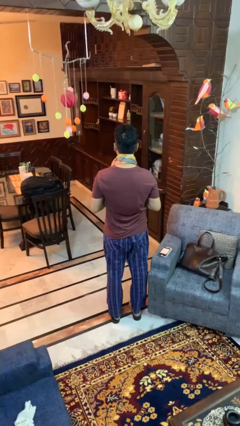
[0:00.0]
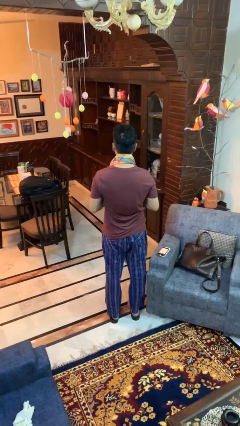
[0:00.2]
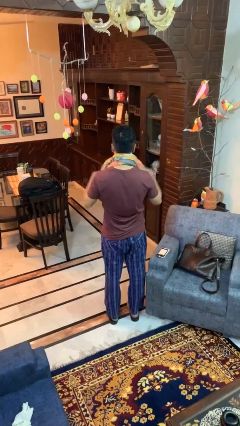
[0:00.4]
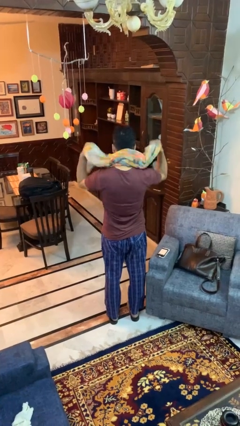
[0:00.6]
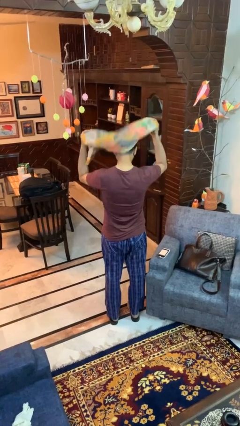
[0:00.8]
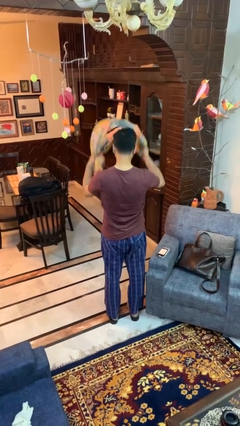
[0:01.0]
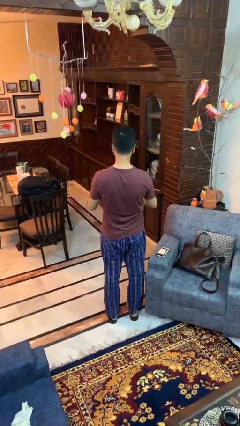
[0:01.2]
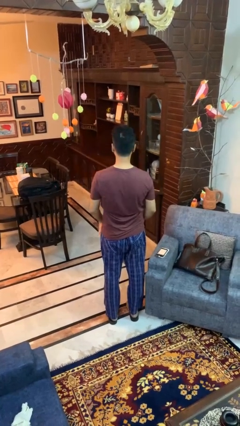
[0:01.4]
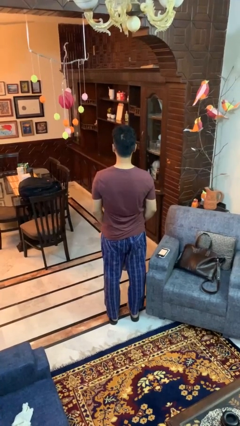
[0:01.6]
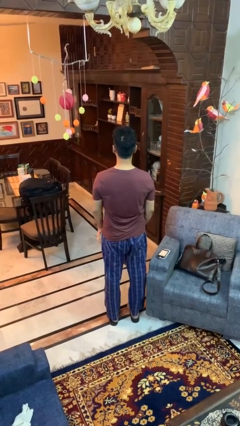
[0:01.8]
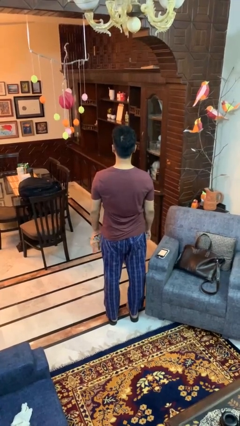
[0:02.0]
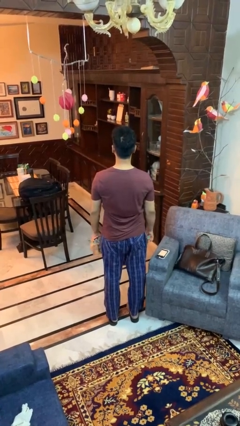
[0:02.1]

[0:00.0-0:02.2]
person takes off scarf

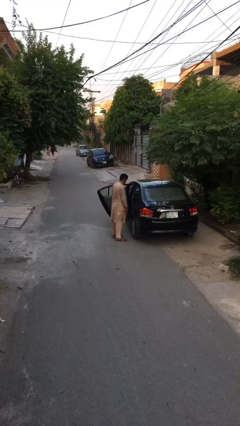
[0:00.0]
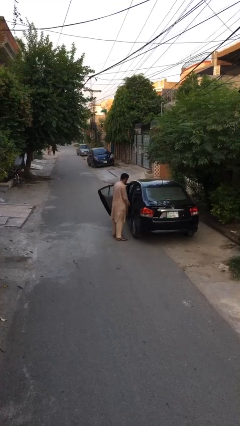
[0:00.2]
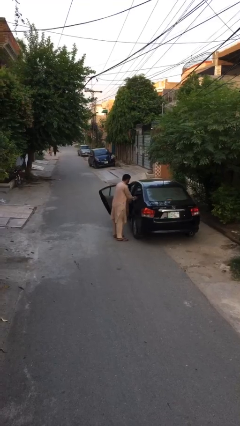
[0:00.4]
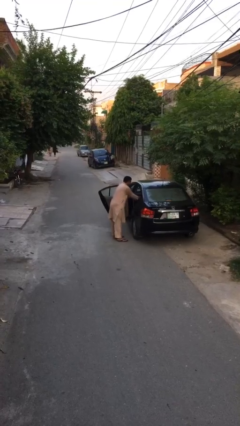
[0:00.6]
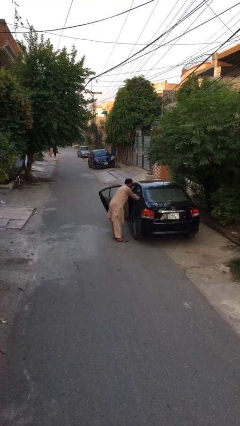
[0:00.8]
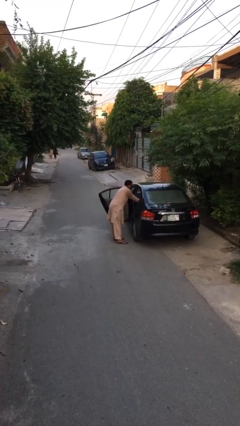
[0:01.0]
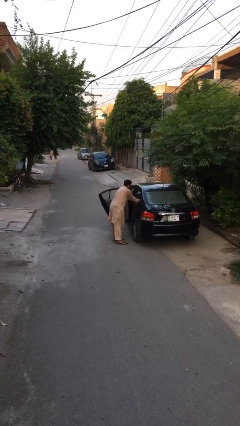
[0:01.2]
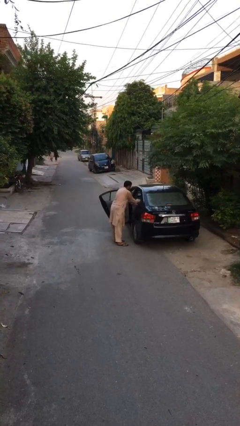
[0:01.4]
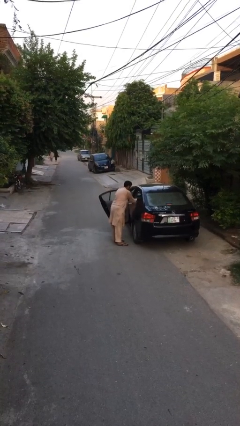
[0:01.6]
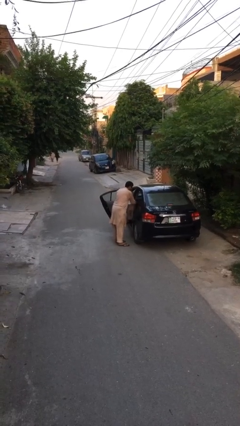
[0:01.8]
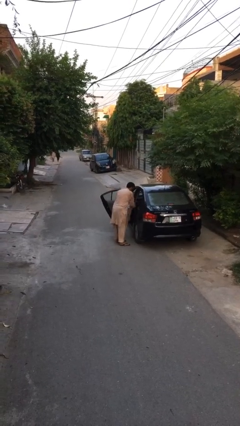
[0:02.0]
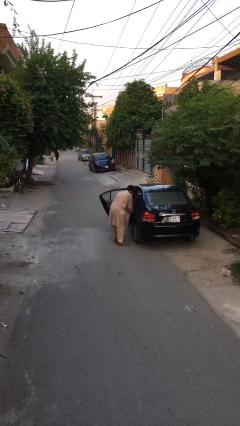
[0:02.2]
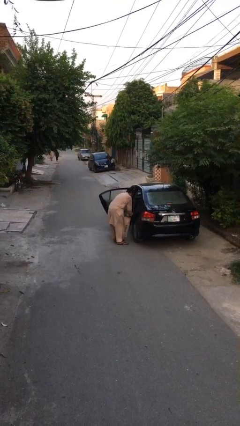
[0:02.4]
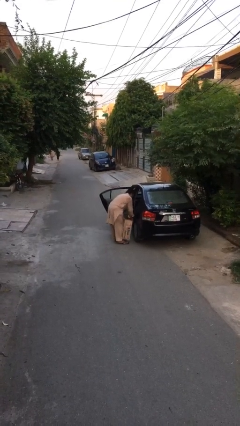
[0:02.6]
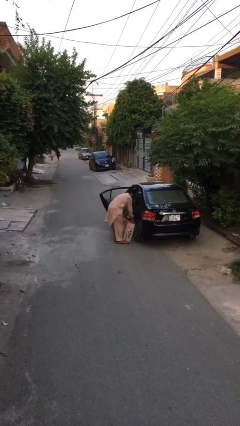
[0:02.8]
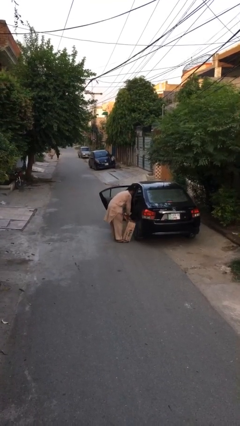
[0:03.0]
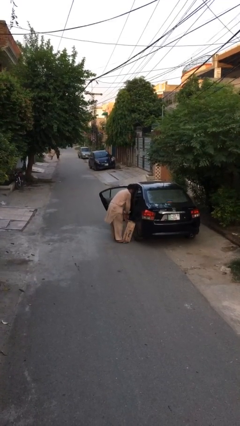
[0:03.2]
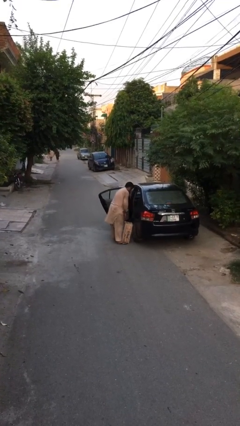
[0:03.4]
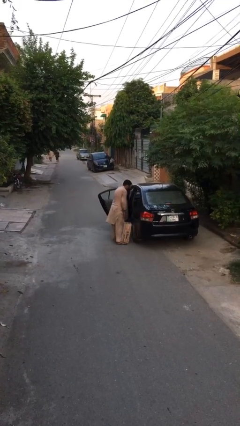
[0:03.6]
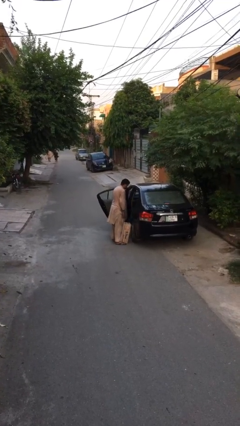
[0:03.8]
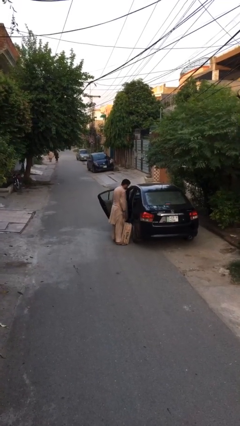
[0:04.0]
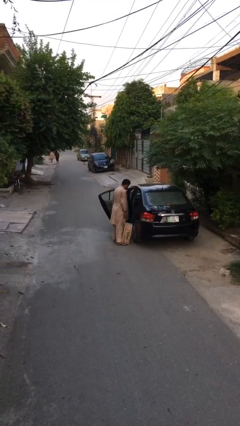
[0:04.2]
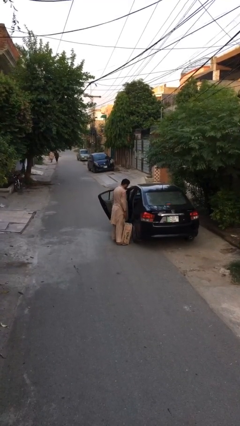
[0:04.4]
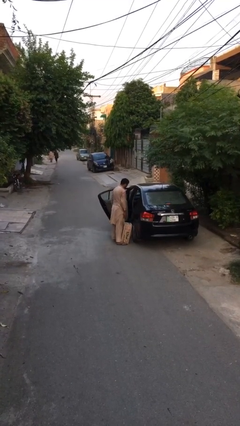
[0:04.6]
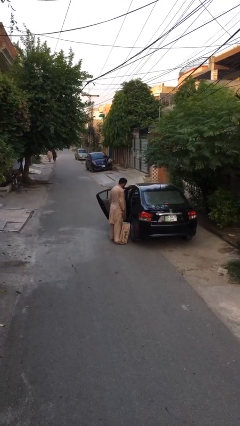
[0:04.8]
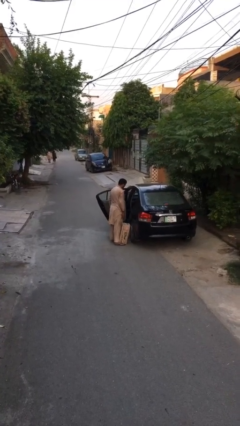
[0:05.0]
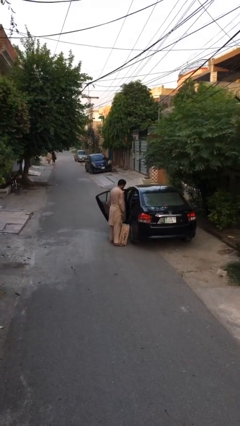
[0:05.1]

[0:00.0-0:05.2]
person unloads car

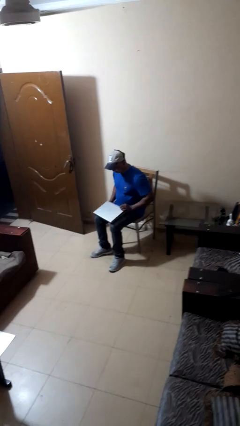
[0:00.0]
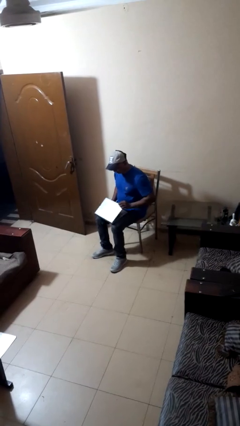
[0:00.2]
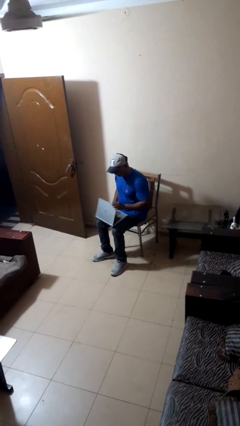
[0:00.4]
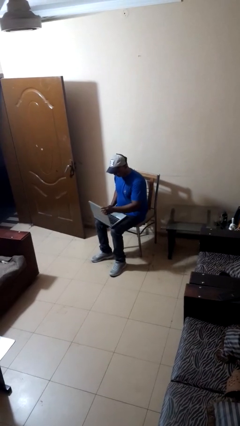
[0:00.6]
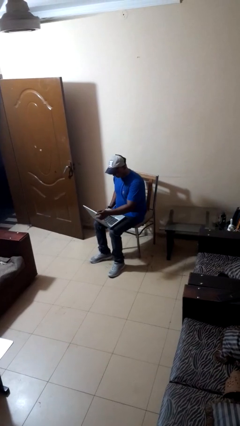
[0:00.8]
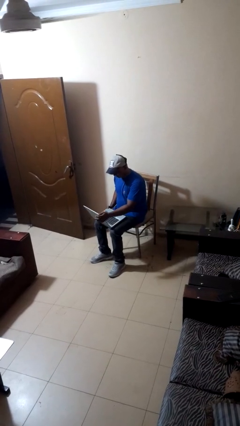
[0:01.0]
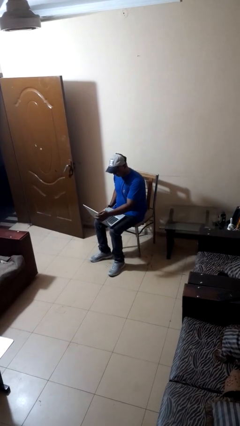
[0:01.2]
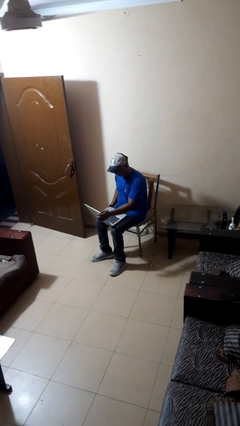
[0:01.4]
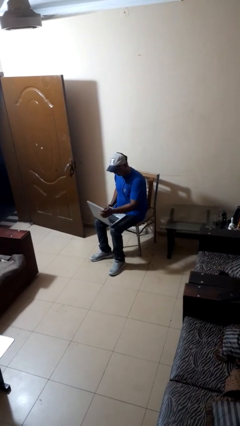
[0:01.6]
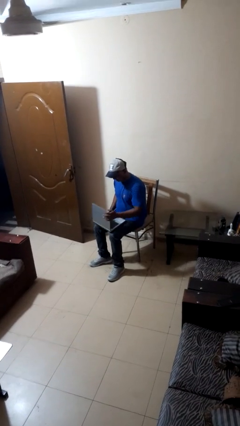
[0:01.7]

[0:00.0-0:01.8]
person opens laptop

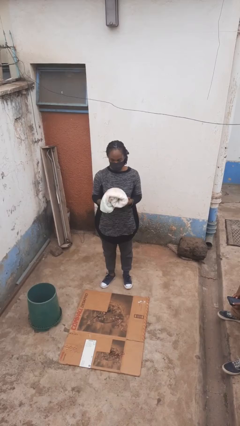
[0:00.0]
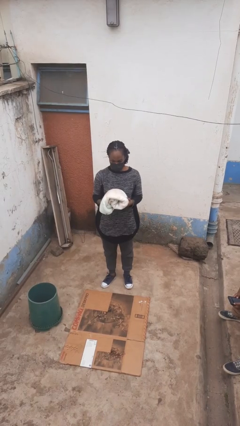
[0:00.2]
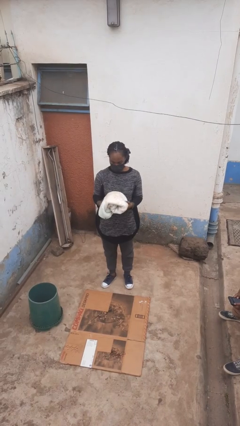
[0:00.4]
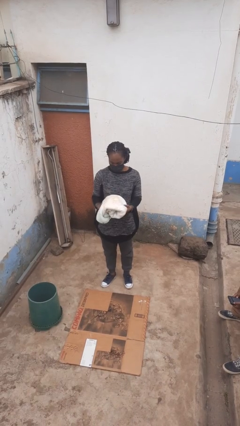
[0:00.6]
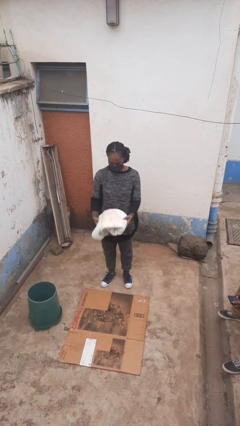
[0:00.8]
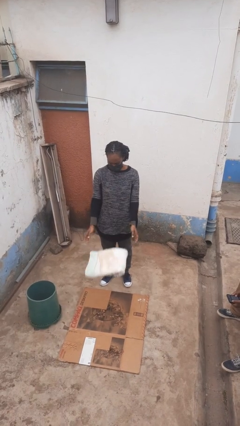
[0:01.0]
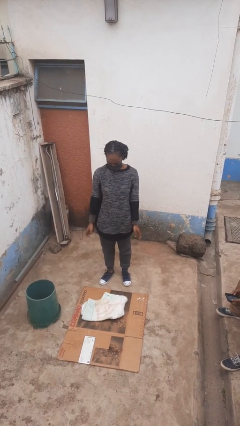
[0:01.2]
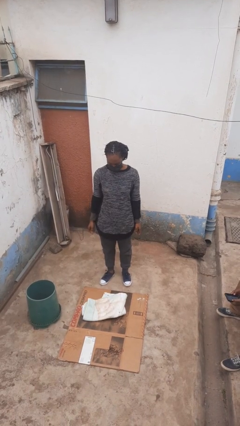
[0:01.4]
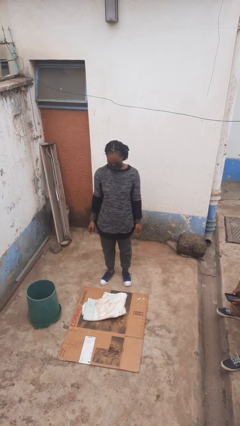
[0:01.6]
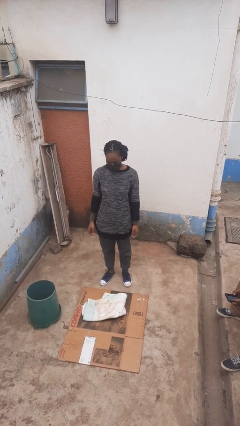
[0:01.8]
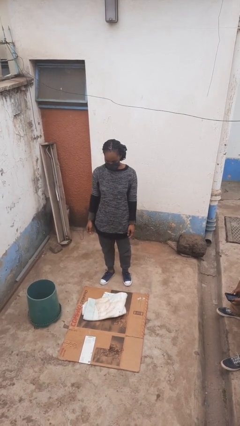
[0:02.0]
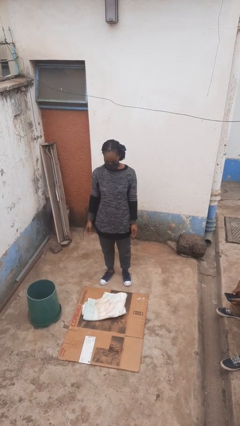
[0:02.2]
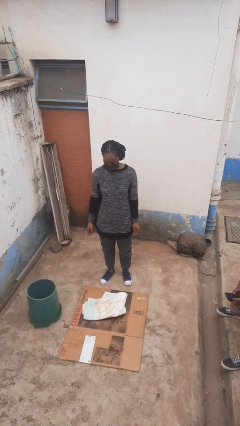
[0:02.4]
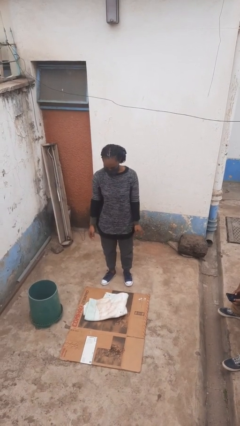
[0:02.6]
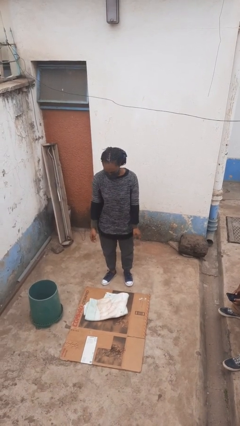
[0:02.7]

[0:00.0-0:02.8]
person drops object

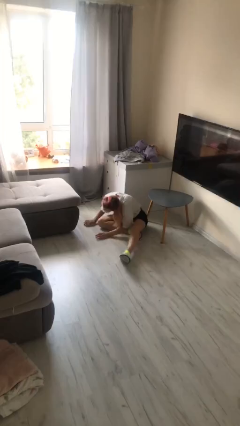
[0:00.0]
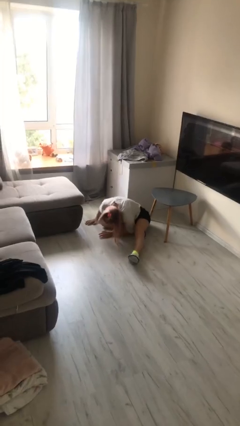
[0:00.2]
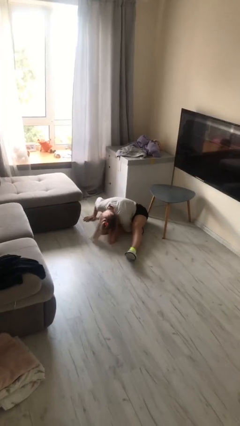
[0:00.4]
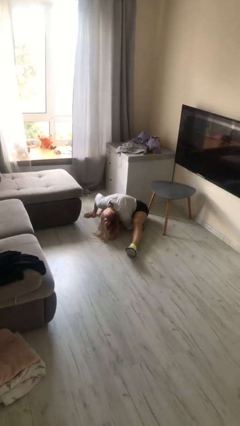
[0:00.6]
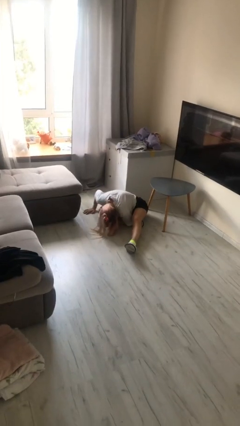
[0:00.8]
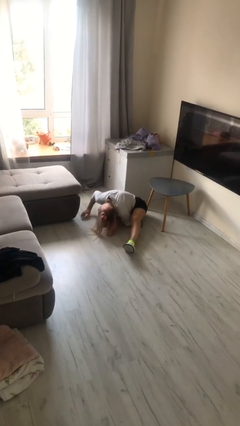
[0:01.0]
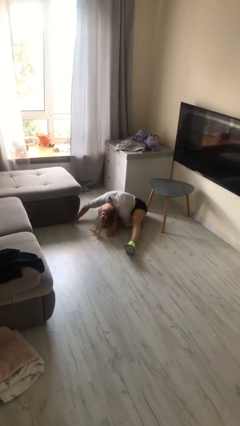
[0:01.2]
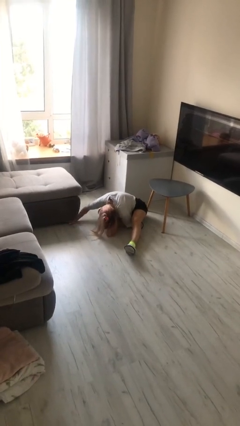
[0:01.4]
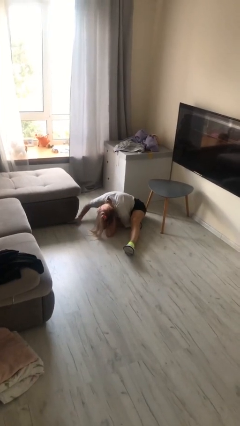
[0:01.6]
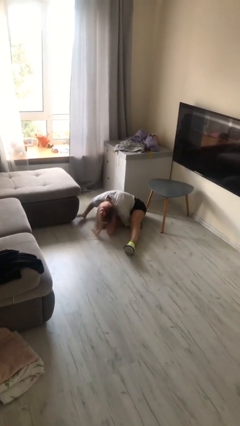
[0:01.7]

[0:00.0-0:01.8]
person searches under couch

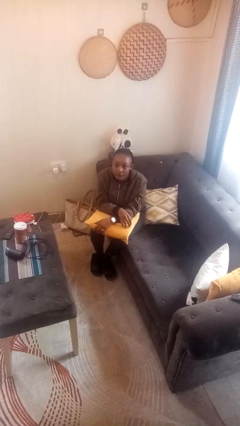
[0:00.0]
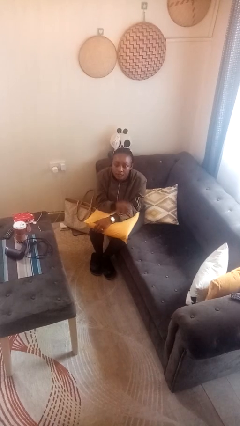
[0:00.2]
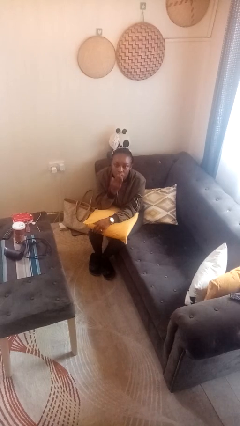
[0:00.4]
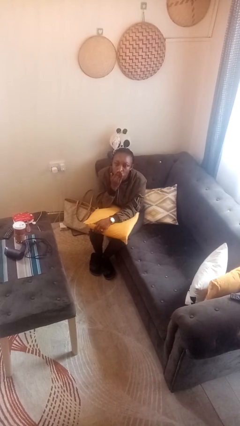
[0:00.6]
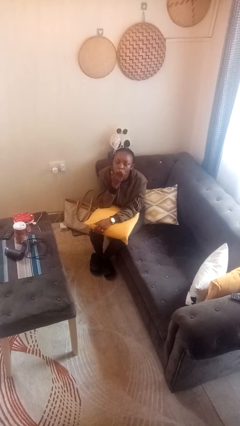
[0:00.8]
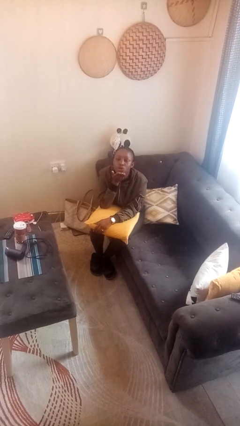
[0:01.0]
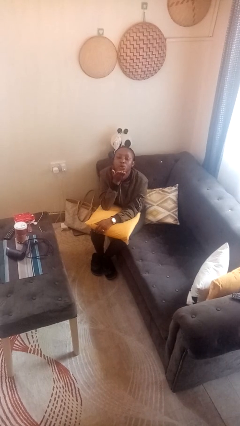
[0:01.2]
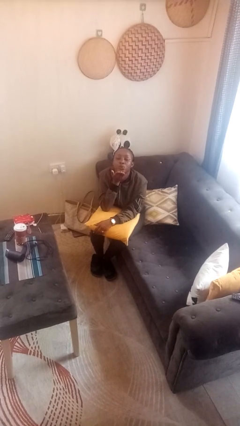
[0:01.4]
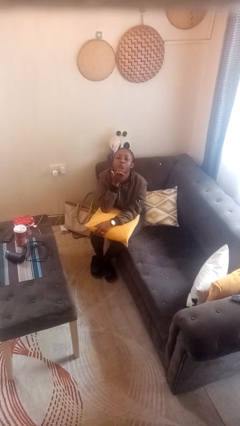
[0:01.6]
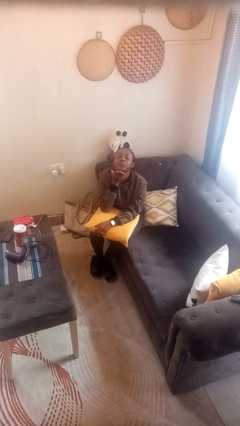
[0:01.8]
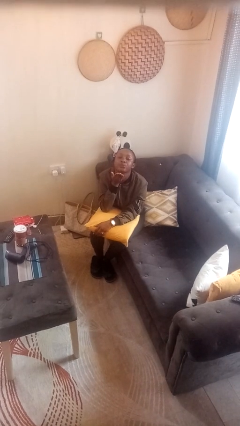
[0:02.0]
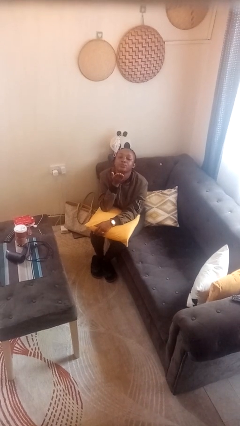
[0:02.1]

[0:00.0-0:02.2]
person gestures blow kiss

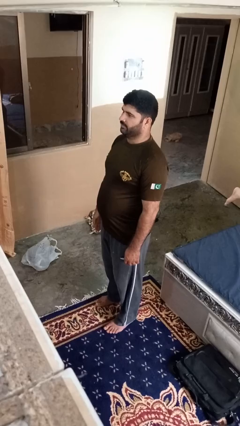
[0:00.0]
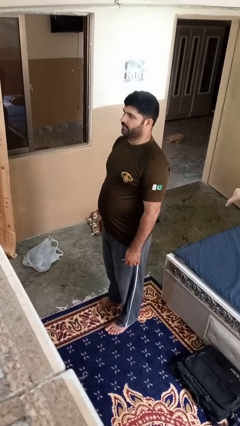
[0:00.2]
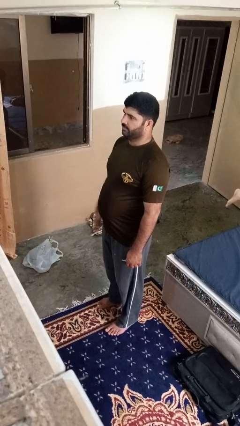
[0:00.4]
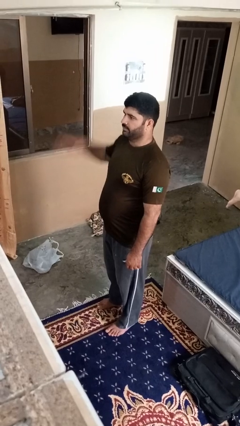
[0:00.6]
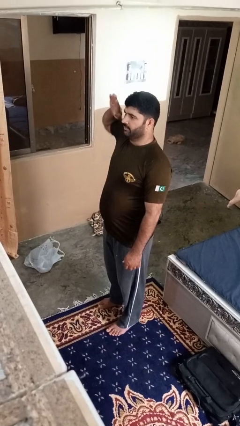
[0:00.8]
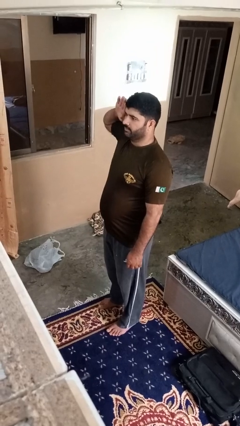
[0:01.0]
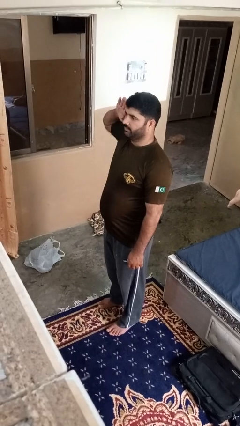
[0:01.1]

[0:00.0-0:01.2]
person salutes

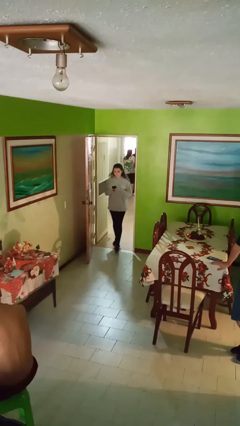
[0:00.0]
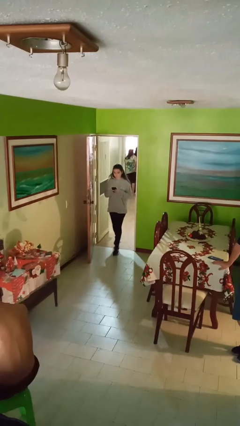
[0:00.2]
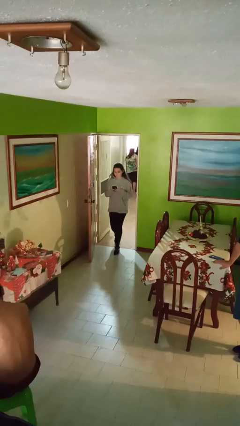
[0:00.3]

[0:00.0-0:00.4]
person enters scene through structure
